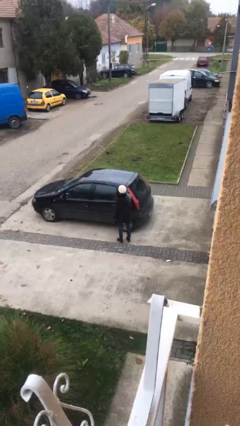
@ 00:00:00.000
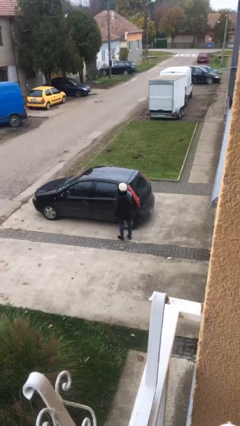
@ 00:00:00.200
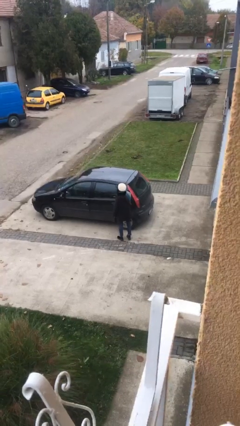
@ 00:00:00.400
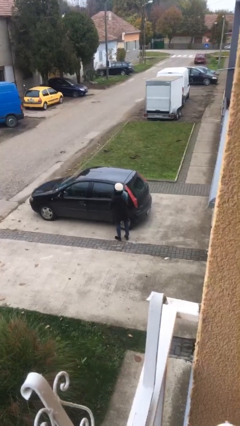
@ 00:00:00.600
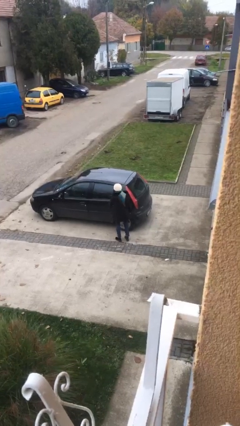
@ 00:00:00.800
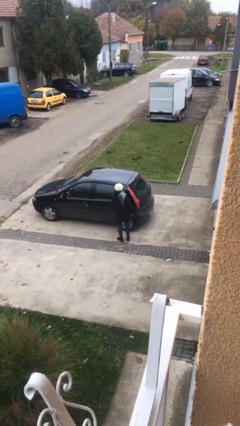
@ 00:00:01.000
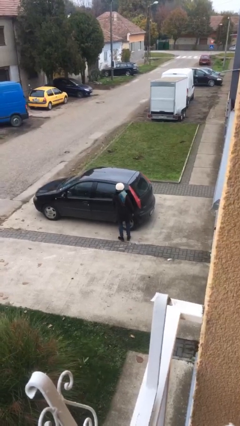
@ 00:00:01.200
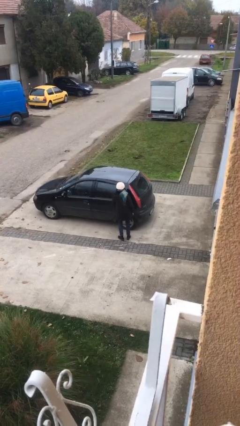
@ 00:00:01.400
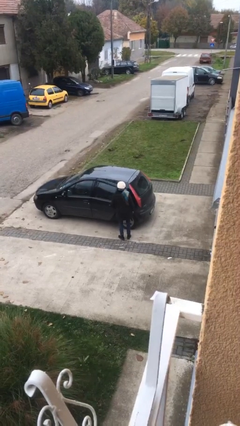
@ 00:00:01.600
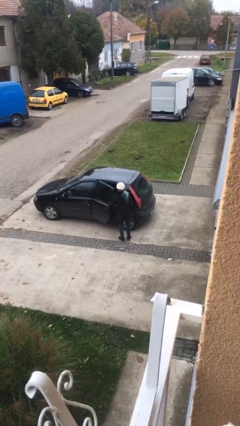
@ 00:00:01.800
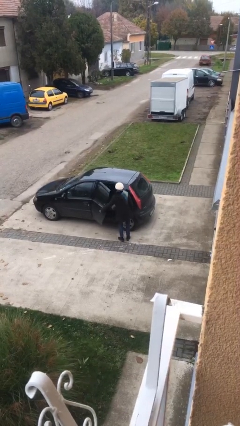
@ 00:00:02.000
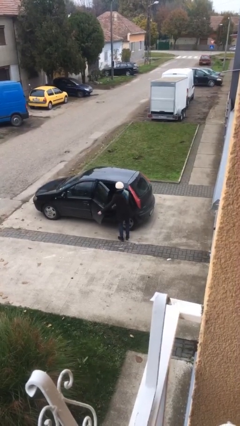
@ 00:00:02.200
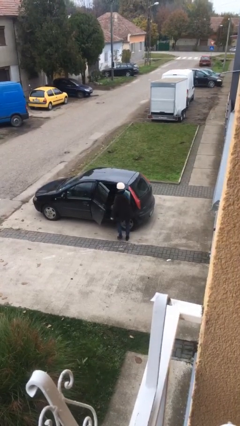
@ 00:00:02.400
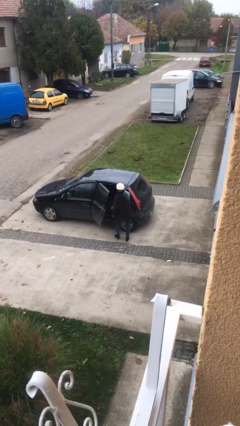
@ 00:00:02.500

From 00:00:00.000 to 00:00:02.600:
person opens car door

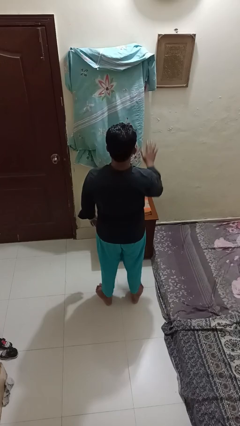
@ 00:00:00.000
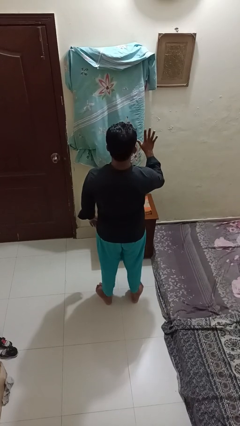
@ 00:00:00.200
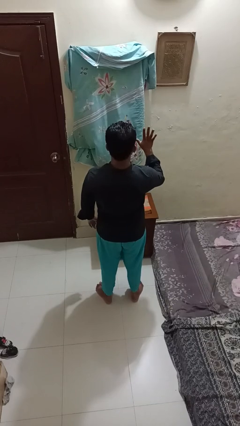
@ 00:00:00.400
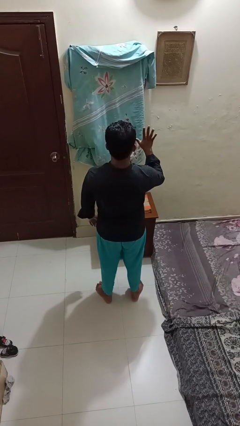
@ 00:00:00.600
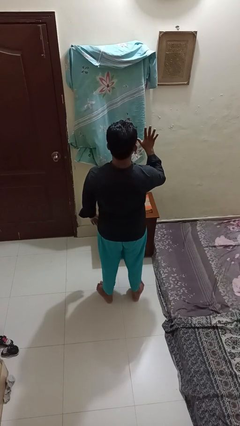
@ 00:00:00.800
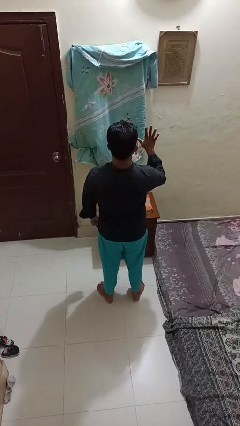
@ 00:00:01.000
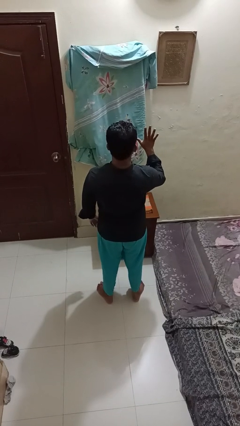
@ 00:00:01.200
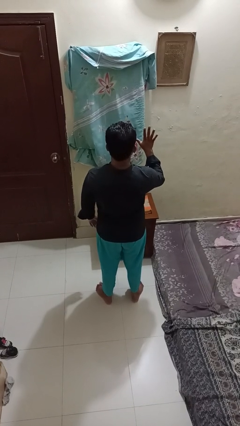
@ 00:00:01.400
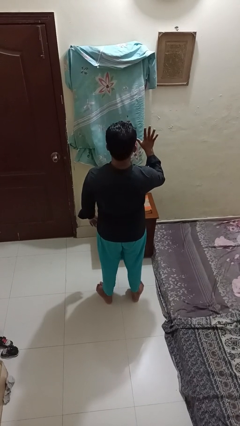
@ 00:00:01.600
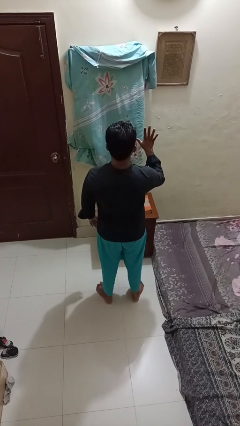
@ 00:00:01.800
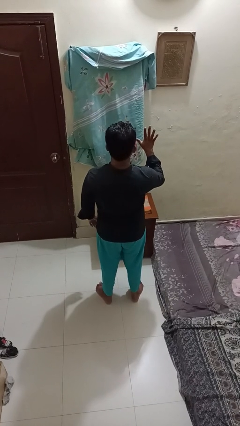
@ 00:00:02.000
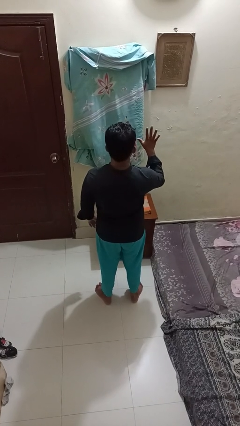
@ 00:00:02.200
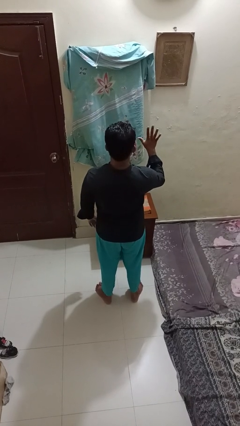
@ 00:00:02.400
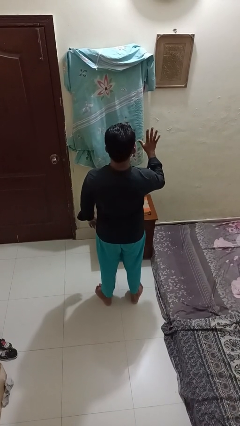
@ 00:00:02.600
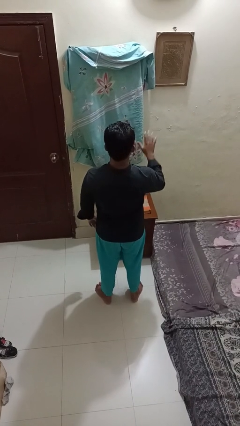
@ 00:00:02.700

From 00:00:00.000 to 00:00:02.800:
person gestures number five

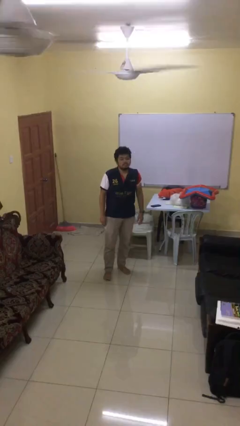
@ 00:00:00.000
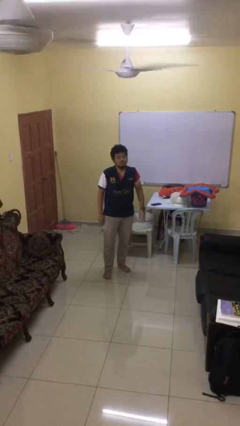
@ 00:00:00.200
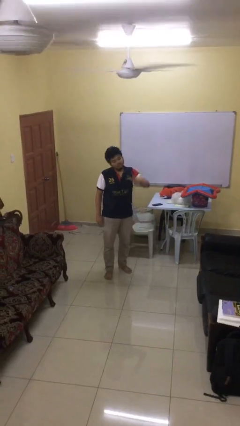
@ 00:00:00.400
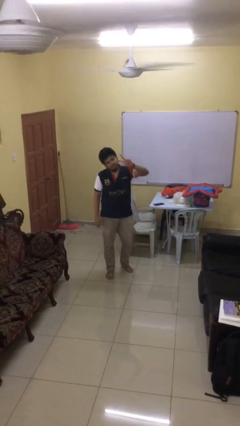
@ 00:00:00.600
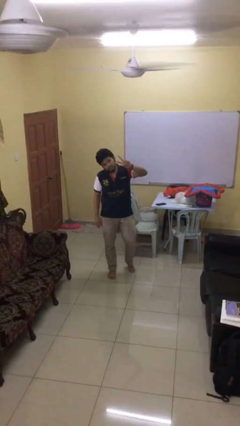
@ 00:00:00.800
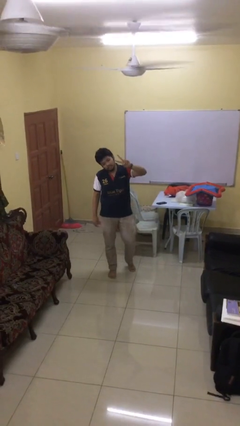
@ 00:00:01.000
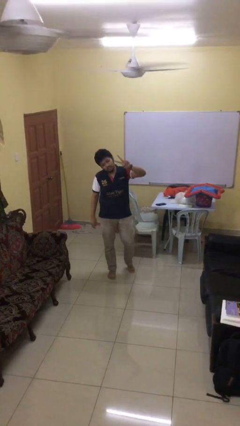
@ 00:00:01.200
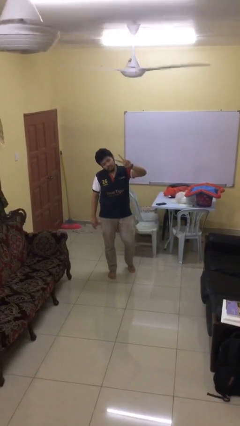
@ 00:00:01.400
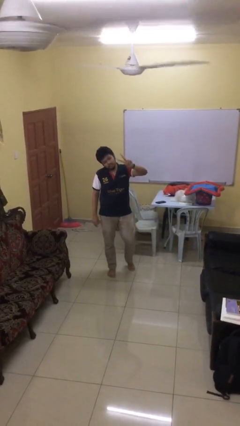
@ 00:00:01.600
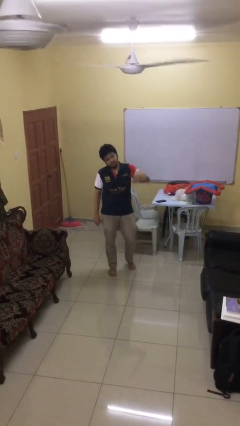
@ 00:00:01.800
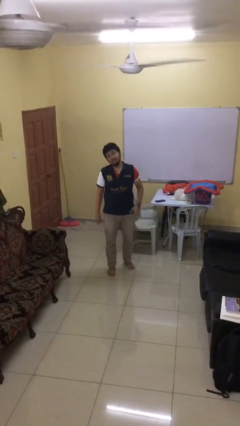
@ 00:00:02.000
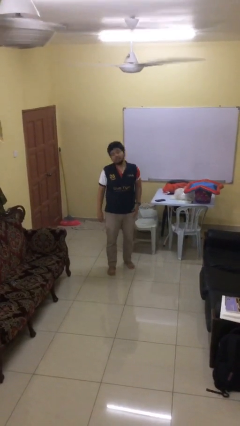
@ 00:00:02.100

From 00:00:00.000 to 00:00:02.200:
person gestures peace

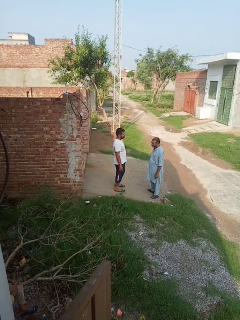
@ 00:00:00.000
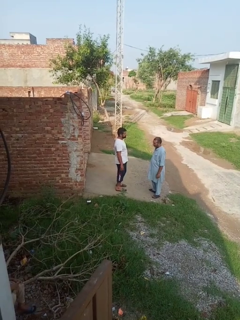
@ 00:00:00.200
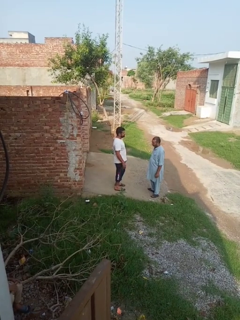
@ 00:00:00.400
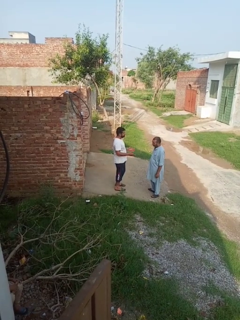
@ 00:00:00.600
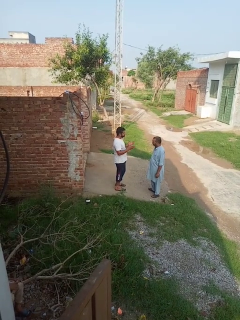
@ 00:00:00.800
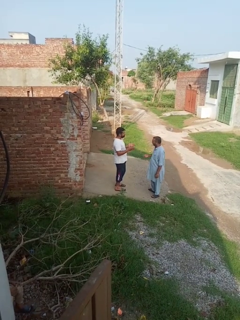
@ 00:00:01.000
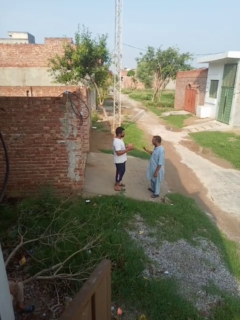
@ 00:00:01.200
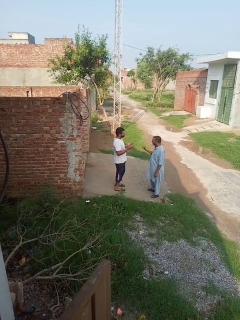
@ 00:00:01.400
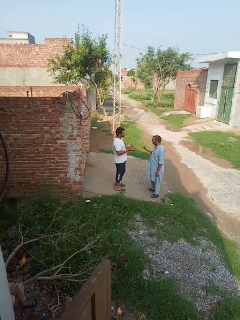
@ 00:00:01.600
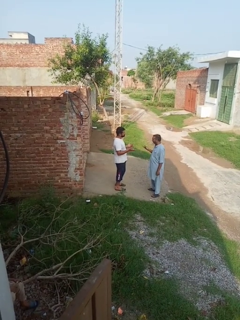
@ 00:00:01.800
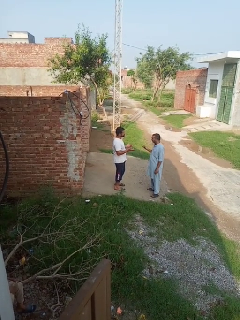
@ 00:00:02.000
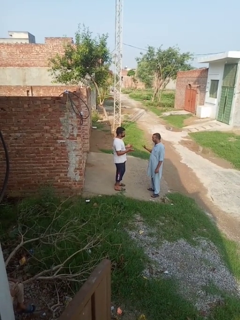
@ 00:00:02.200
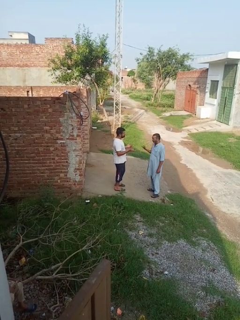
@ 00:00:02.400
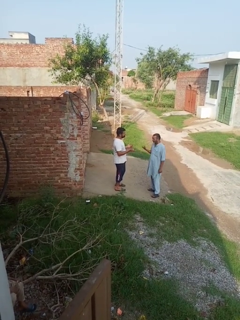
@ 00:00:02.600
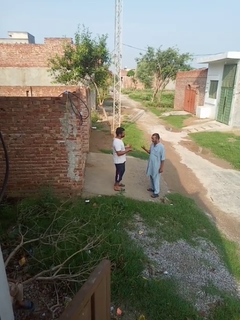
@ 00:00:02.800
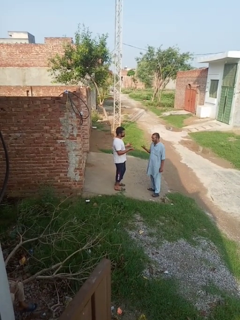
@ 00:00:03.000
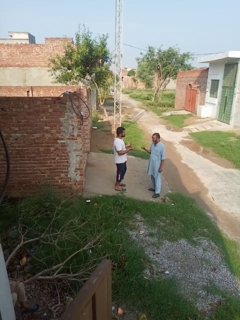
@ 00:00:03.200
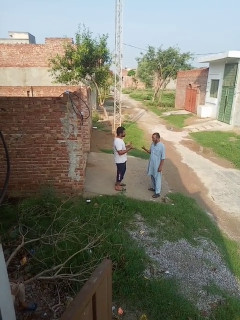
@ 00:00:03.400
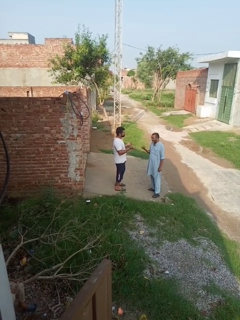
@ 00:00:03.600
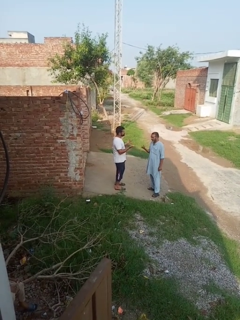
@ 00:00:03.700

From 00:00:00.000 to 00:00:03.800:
person talks to person

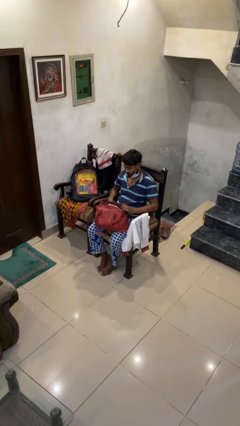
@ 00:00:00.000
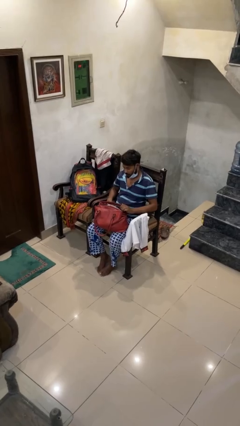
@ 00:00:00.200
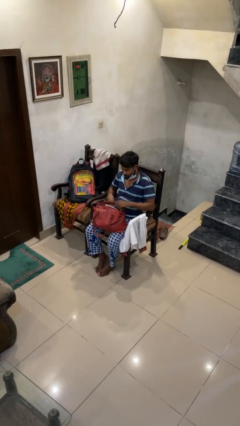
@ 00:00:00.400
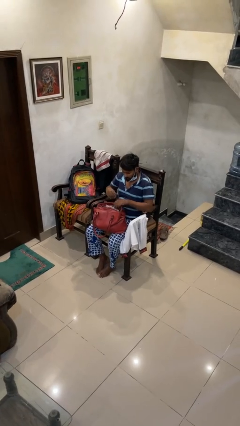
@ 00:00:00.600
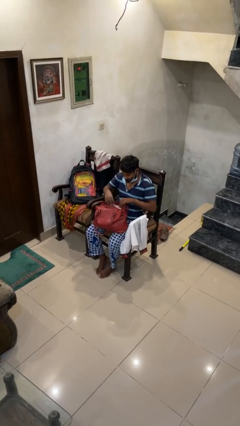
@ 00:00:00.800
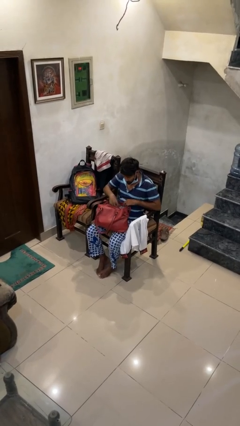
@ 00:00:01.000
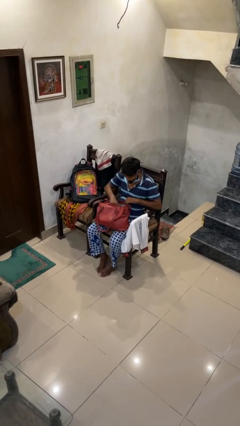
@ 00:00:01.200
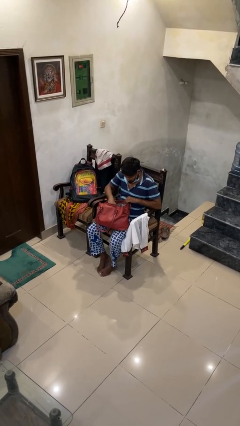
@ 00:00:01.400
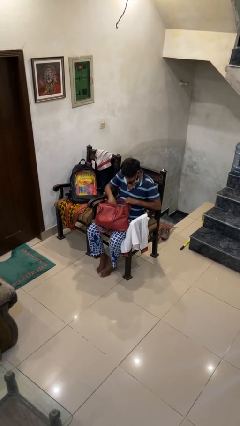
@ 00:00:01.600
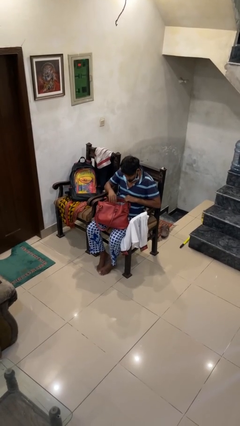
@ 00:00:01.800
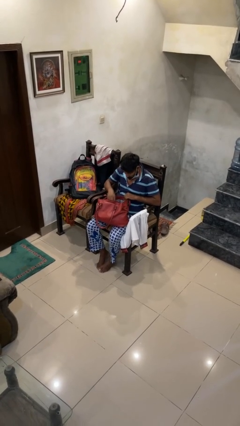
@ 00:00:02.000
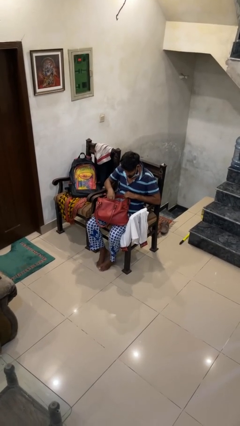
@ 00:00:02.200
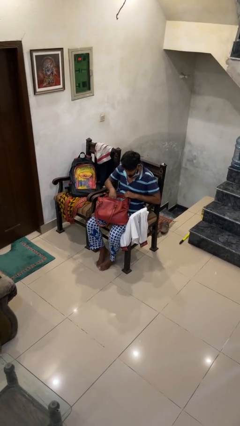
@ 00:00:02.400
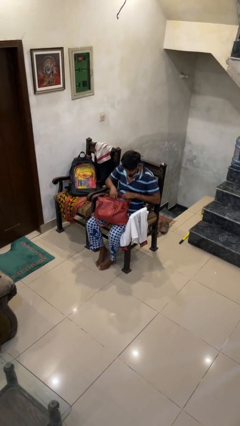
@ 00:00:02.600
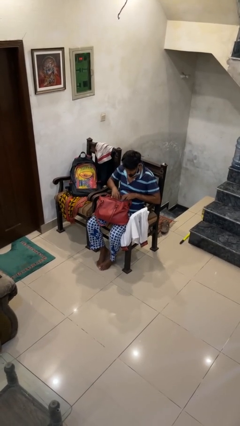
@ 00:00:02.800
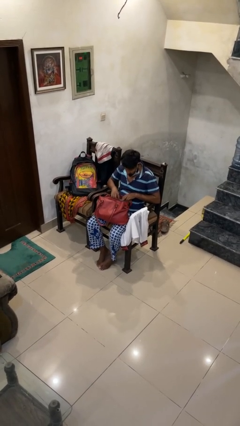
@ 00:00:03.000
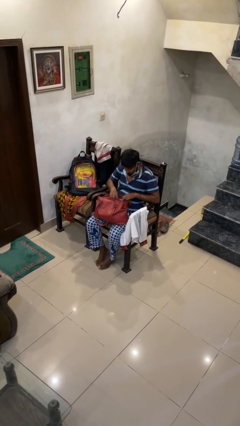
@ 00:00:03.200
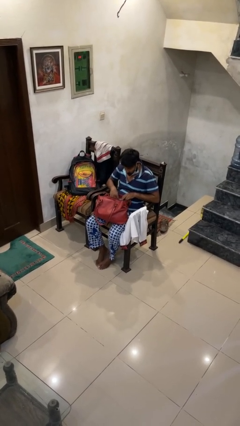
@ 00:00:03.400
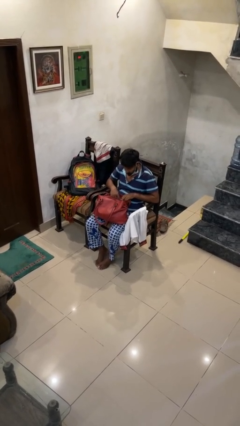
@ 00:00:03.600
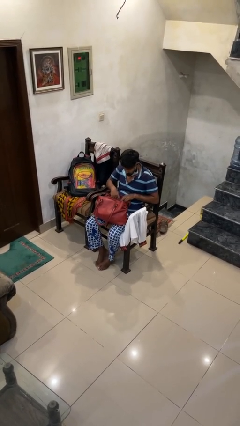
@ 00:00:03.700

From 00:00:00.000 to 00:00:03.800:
person searches in purse

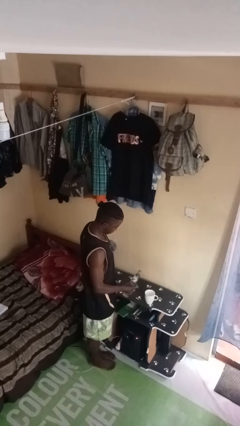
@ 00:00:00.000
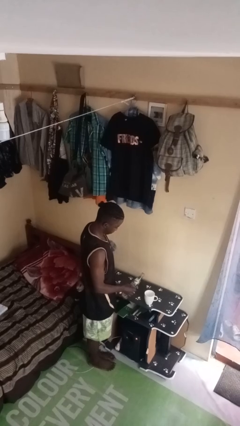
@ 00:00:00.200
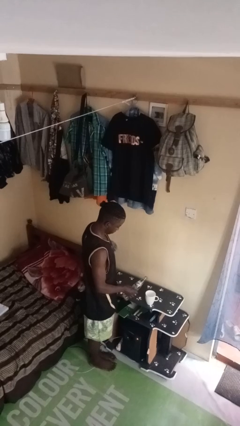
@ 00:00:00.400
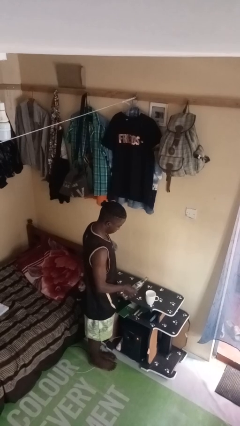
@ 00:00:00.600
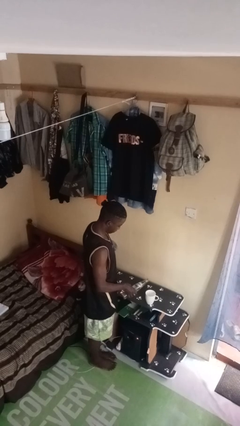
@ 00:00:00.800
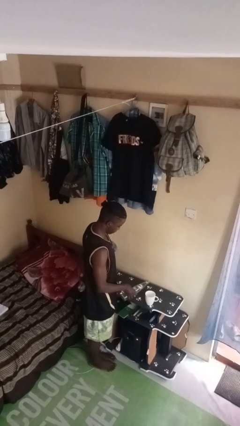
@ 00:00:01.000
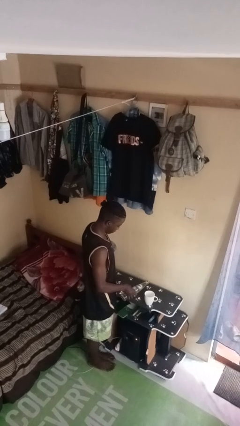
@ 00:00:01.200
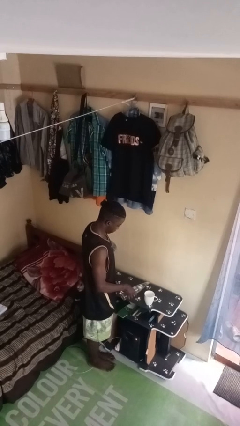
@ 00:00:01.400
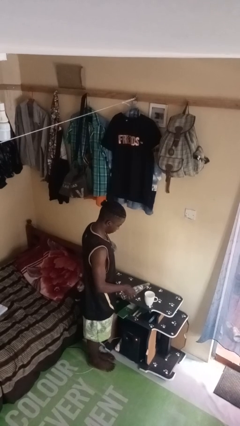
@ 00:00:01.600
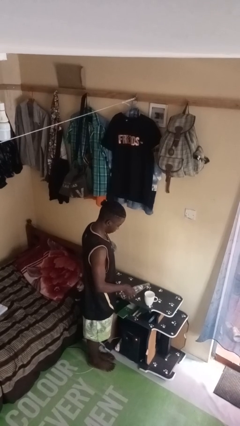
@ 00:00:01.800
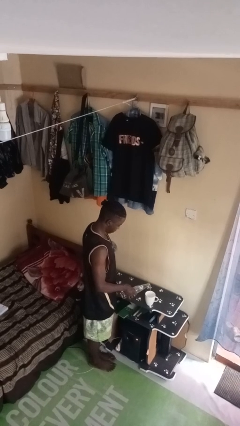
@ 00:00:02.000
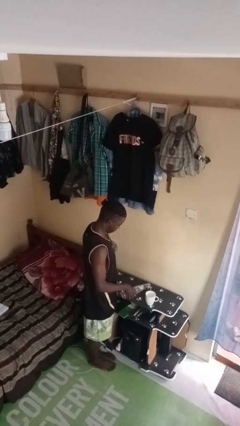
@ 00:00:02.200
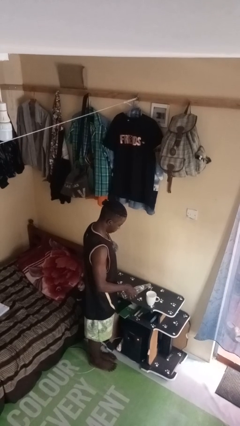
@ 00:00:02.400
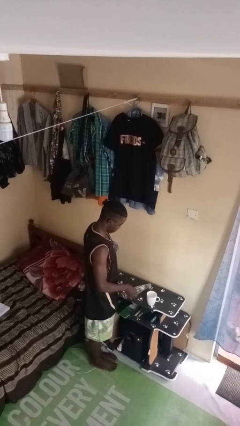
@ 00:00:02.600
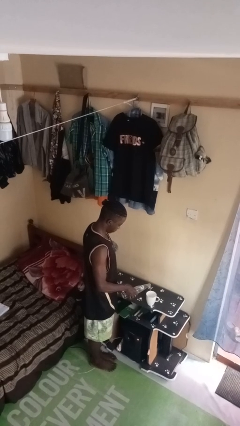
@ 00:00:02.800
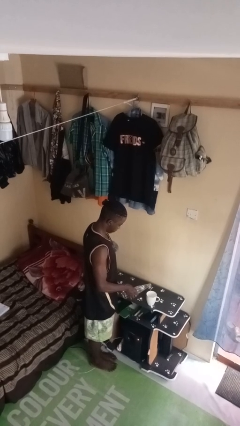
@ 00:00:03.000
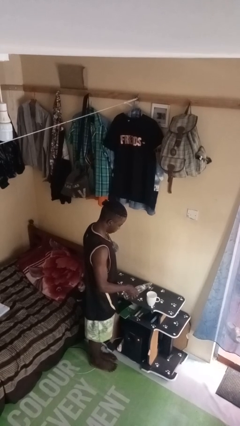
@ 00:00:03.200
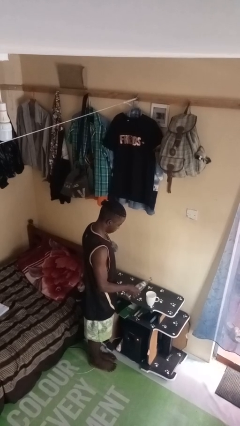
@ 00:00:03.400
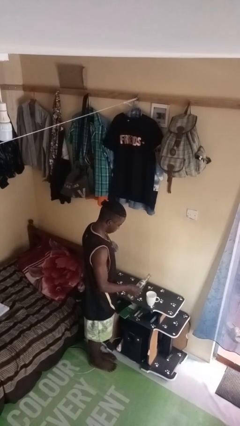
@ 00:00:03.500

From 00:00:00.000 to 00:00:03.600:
person pours liquid into cup
